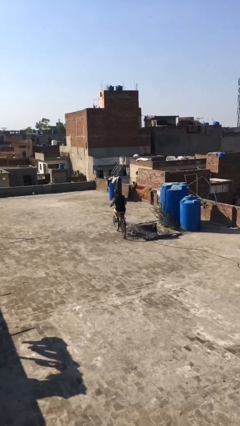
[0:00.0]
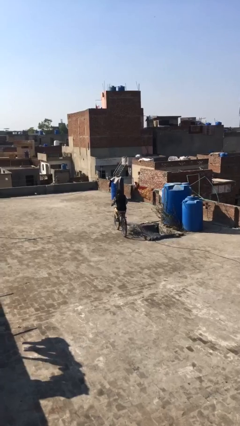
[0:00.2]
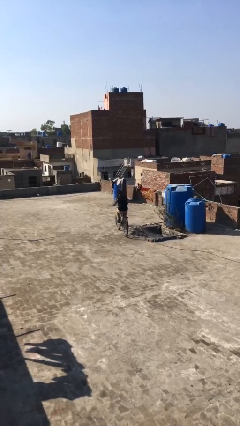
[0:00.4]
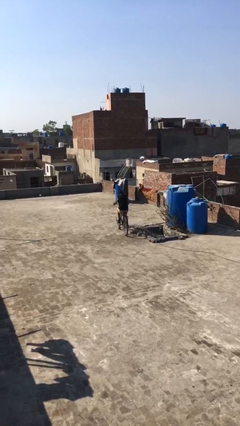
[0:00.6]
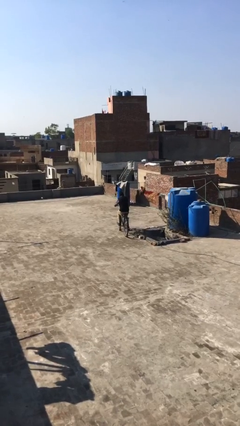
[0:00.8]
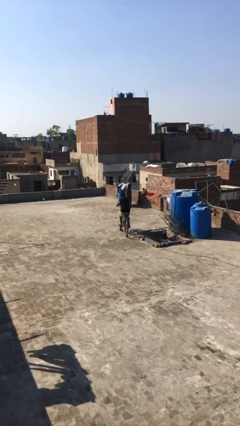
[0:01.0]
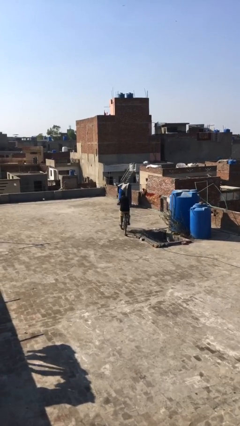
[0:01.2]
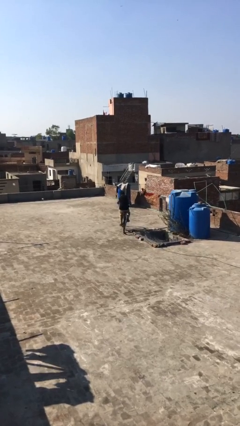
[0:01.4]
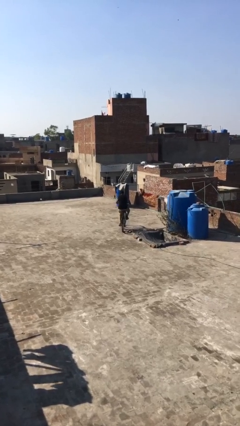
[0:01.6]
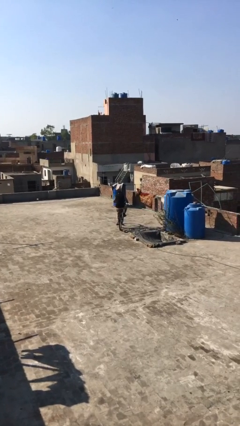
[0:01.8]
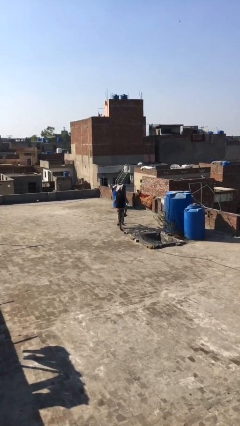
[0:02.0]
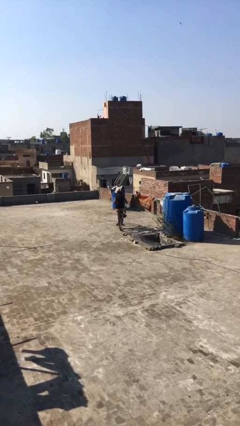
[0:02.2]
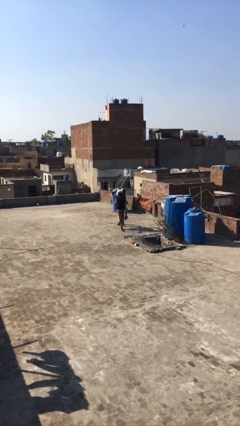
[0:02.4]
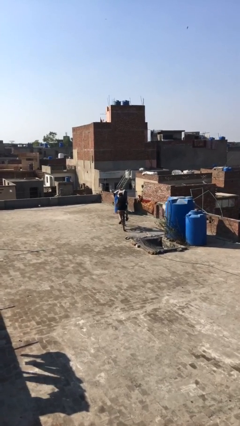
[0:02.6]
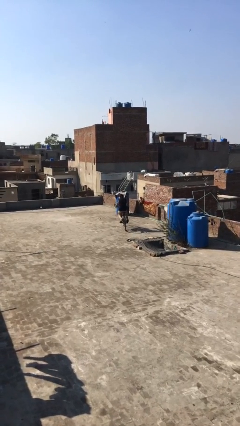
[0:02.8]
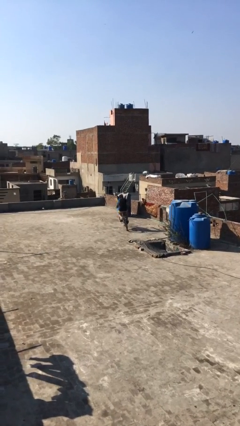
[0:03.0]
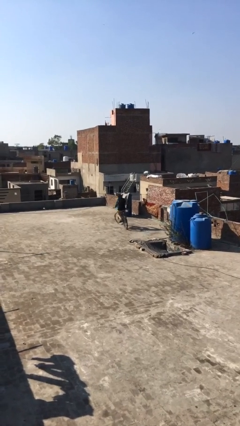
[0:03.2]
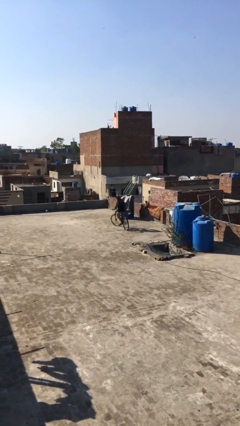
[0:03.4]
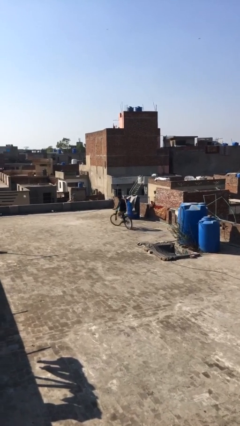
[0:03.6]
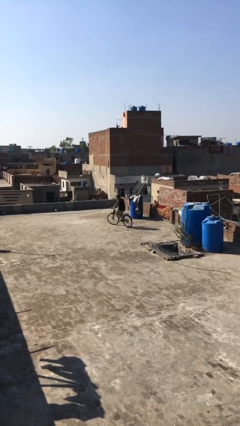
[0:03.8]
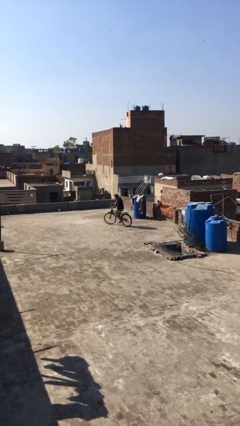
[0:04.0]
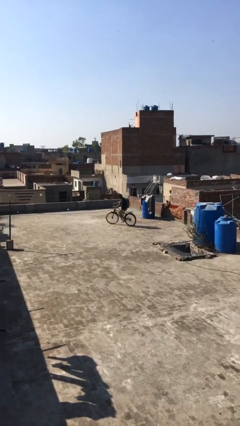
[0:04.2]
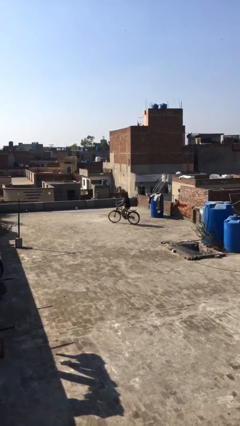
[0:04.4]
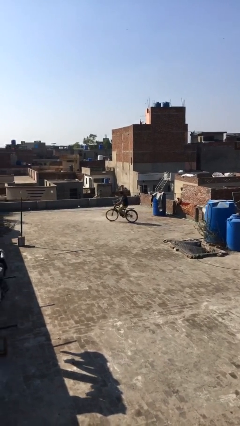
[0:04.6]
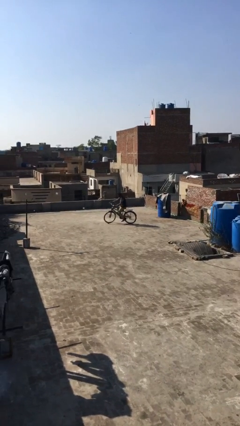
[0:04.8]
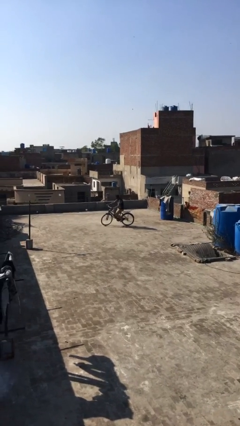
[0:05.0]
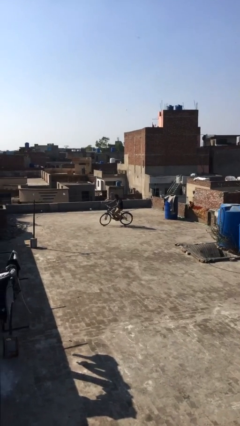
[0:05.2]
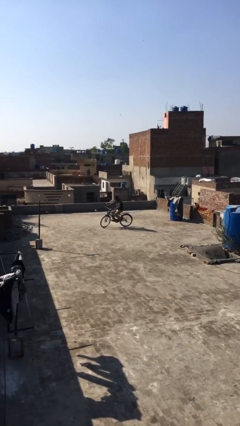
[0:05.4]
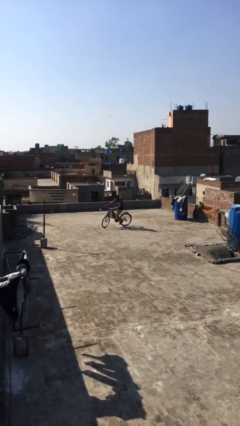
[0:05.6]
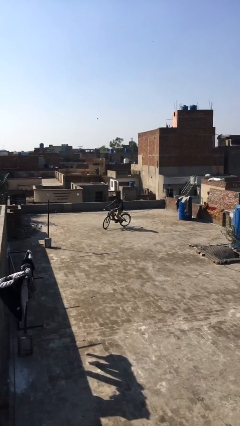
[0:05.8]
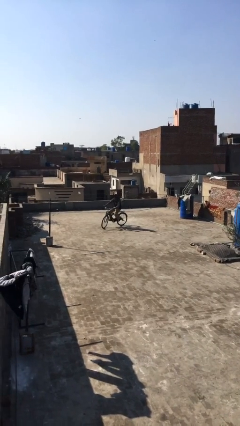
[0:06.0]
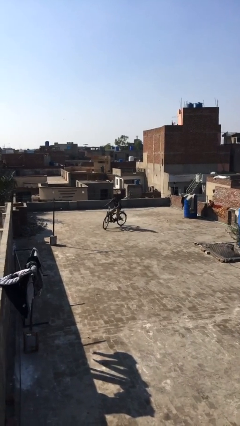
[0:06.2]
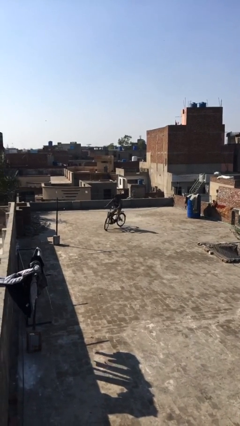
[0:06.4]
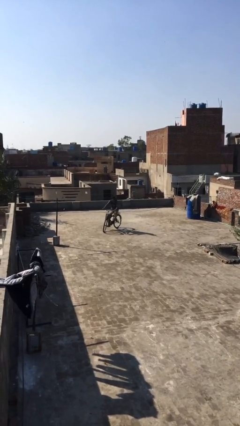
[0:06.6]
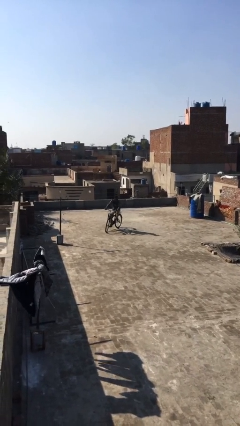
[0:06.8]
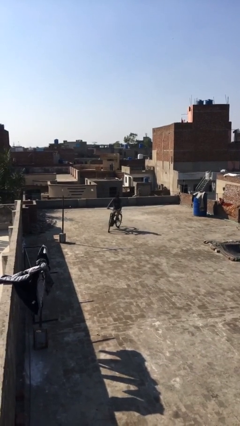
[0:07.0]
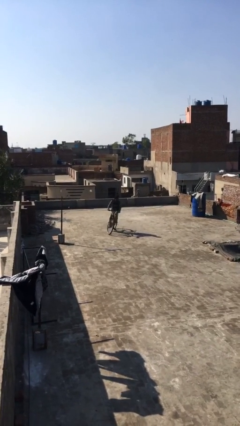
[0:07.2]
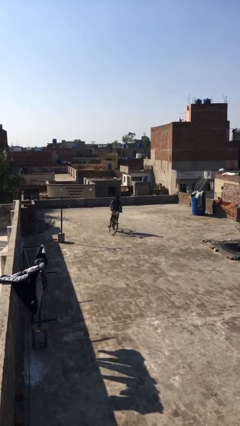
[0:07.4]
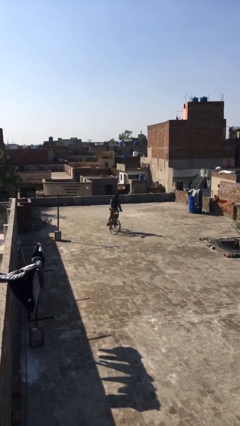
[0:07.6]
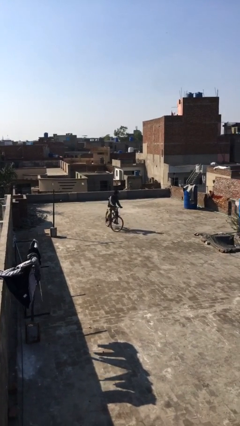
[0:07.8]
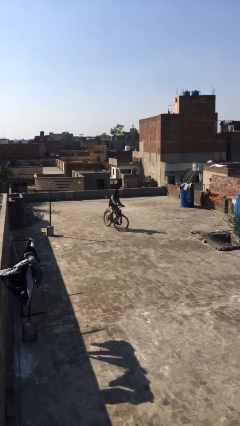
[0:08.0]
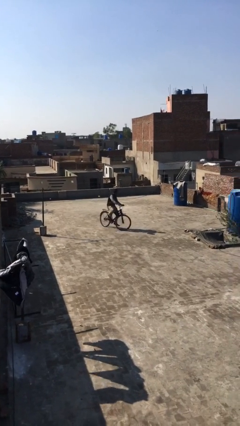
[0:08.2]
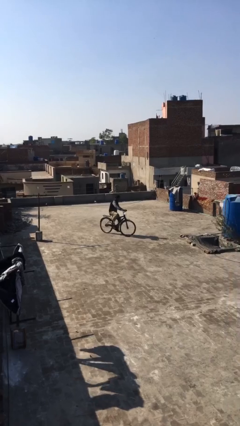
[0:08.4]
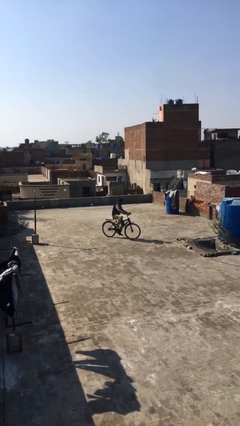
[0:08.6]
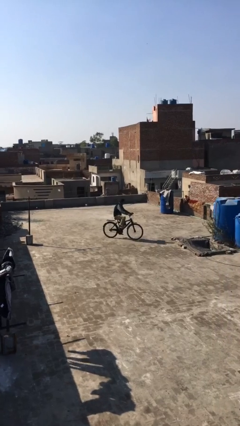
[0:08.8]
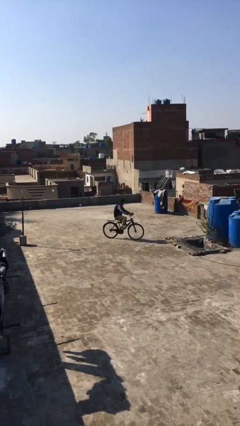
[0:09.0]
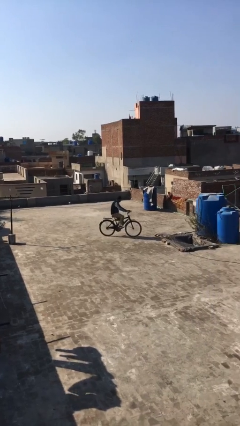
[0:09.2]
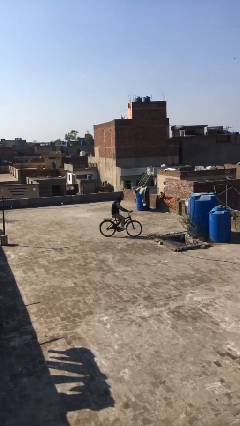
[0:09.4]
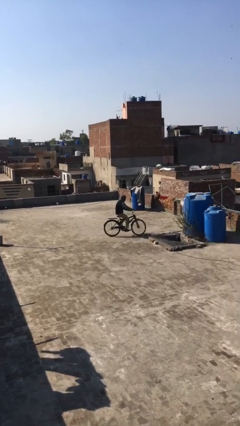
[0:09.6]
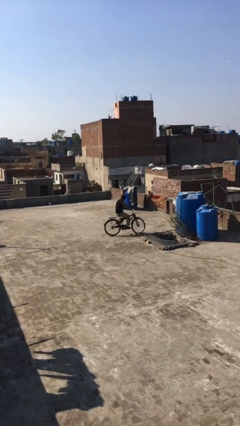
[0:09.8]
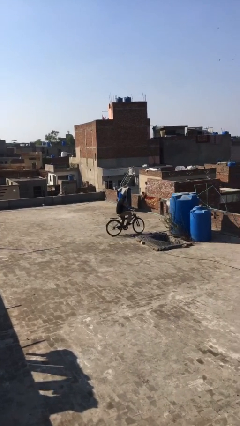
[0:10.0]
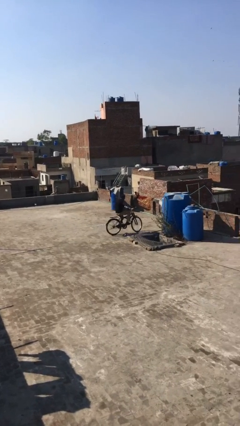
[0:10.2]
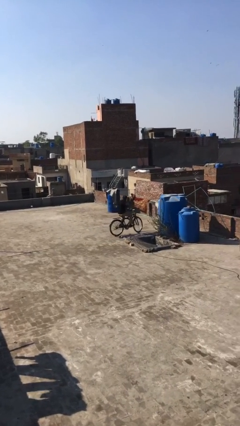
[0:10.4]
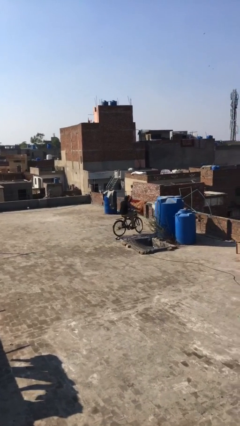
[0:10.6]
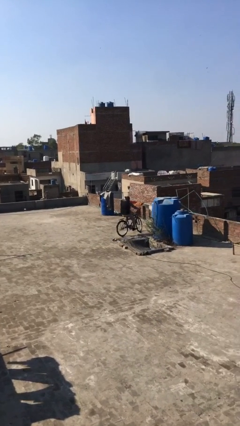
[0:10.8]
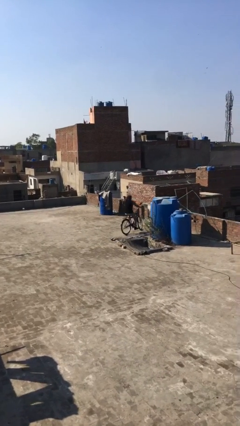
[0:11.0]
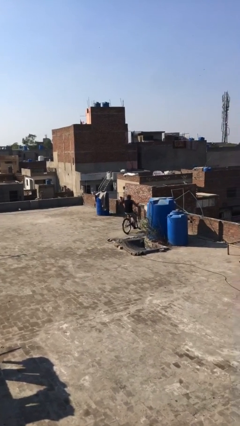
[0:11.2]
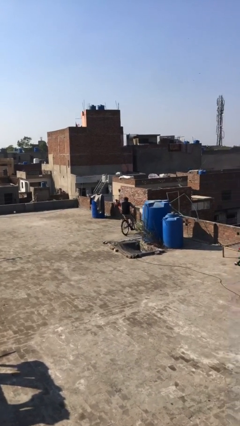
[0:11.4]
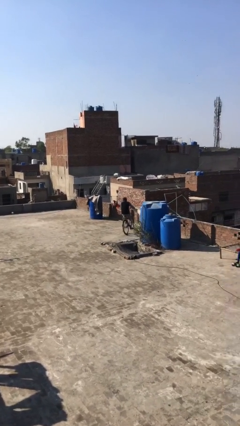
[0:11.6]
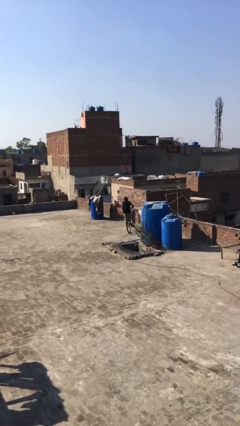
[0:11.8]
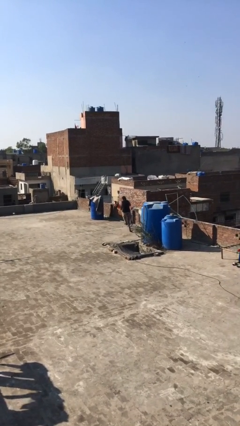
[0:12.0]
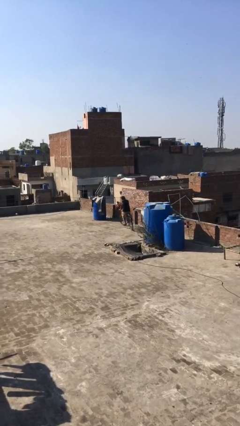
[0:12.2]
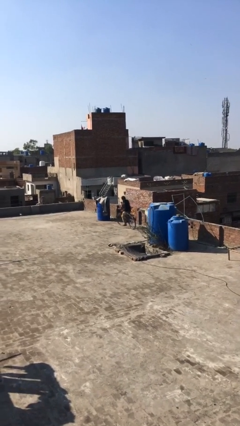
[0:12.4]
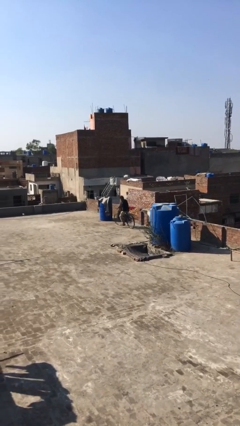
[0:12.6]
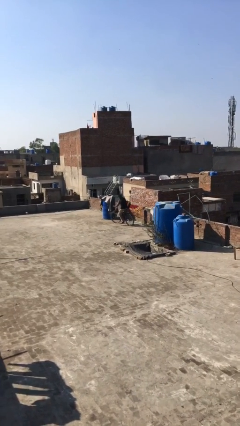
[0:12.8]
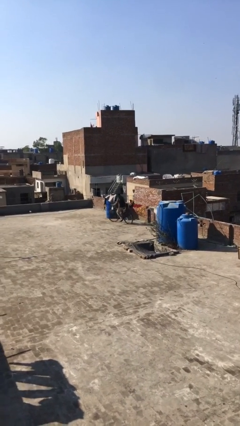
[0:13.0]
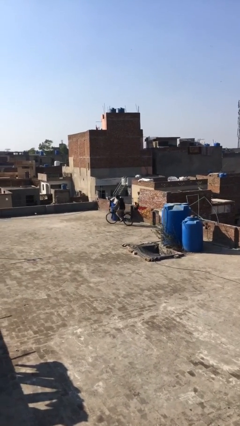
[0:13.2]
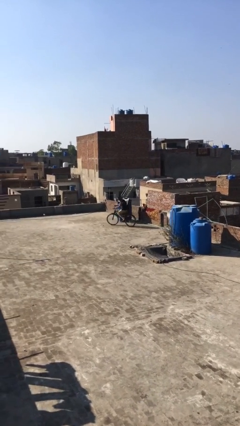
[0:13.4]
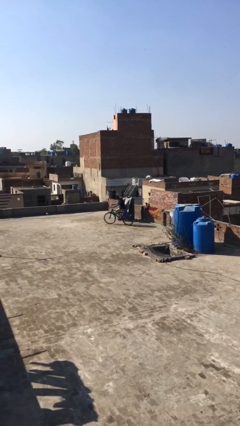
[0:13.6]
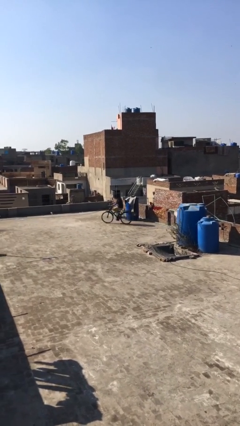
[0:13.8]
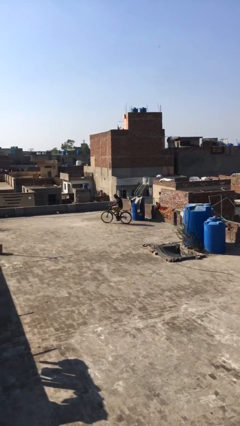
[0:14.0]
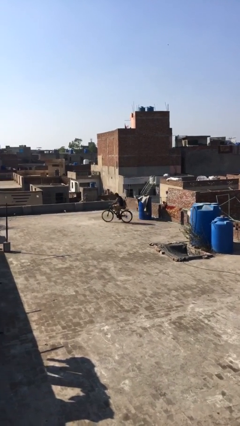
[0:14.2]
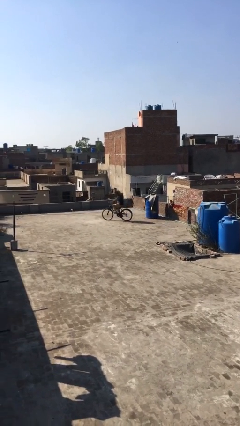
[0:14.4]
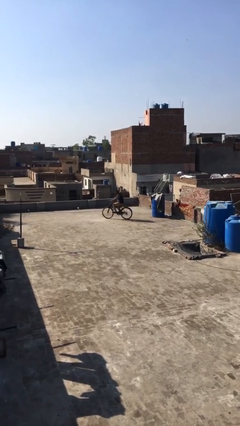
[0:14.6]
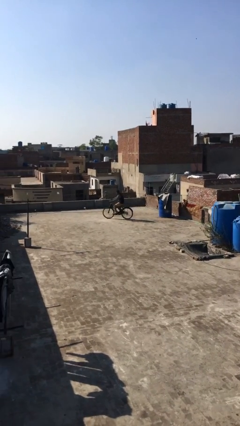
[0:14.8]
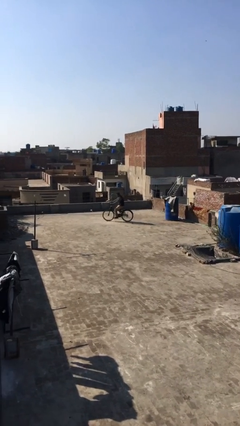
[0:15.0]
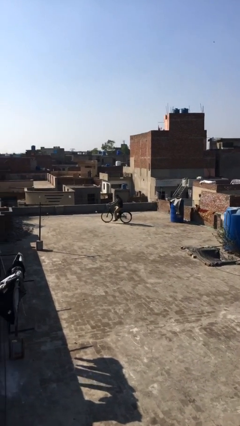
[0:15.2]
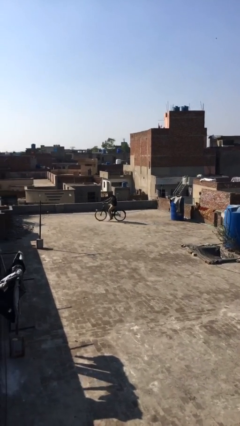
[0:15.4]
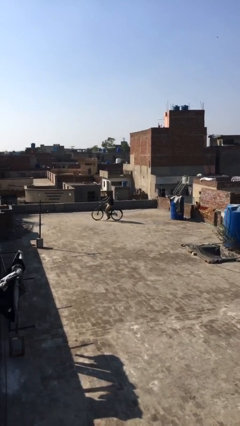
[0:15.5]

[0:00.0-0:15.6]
person rides bicycle

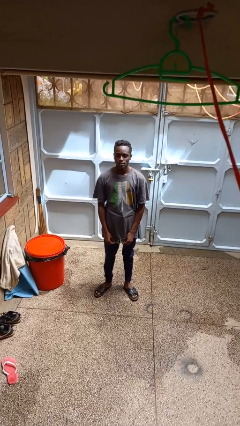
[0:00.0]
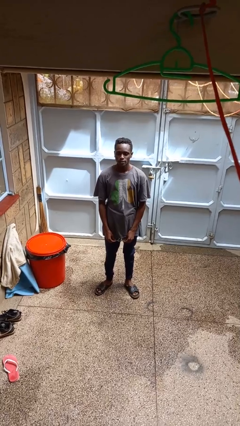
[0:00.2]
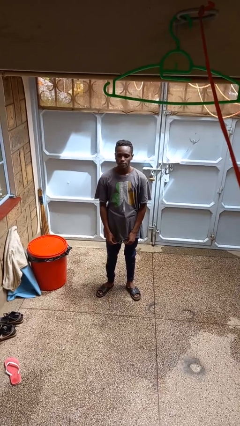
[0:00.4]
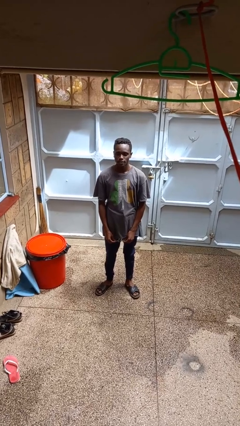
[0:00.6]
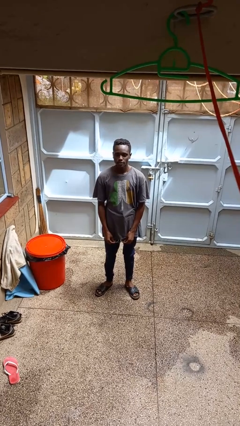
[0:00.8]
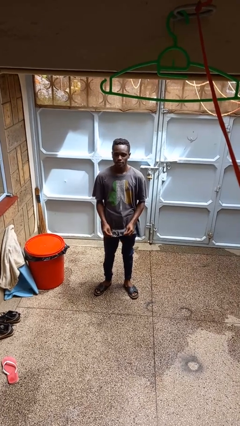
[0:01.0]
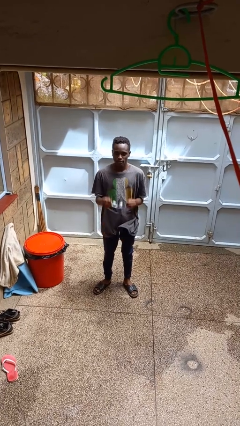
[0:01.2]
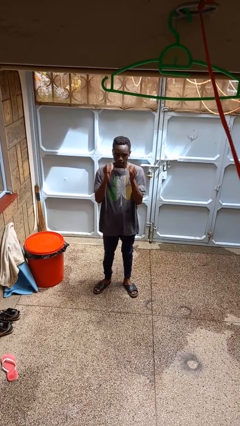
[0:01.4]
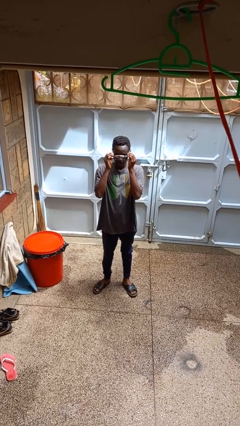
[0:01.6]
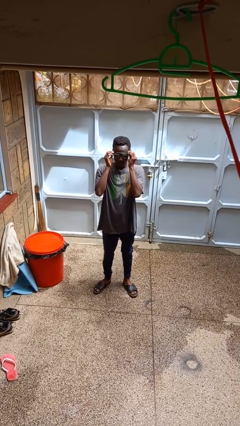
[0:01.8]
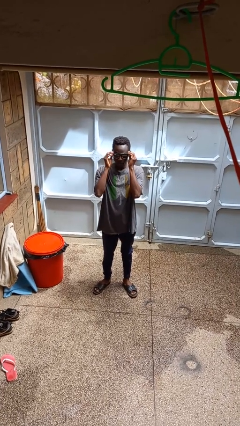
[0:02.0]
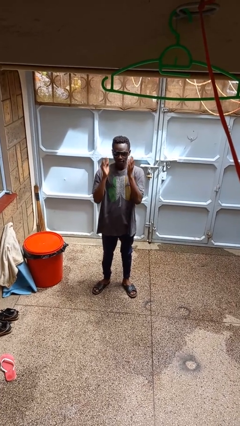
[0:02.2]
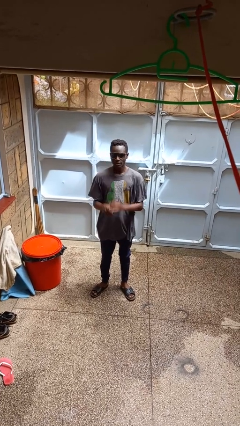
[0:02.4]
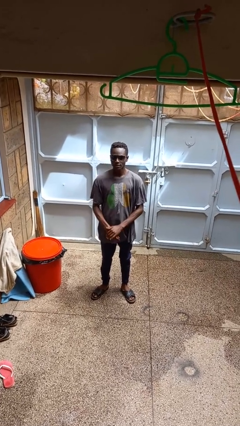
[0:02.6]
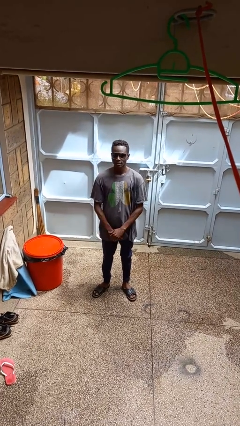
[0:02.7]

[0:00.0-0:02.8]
person puts on sunglasses
